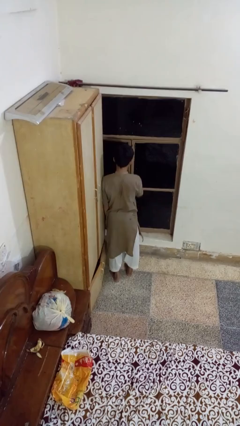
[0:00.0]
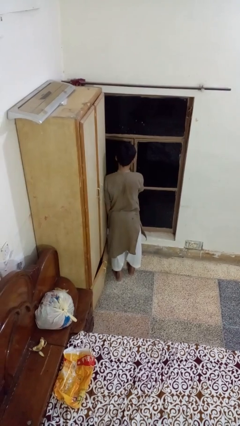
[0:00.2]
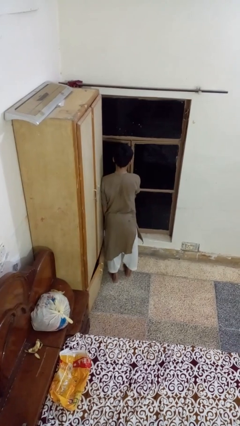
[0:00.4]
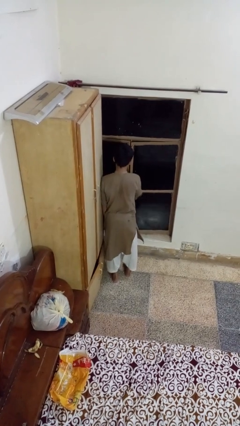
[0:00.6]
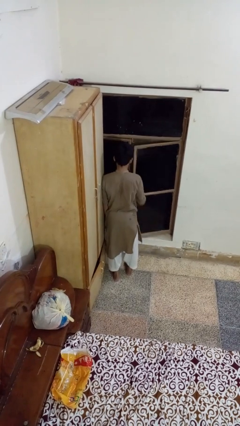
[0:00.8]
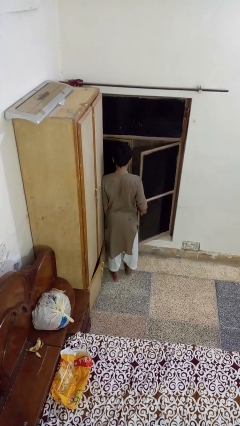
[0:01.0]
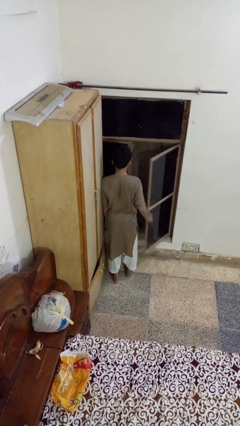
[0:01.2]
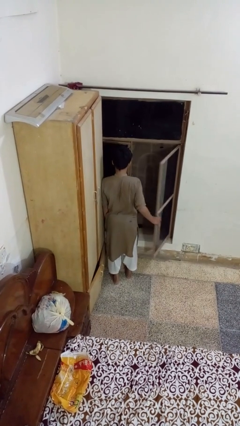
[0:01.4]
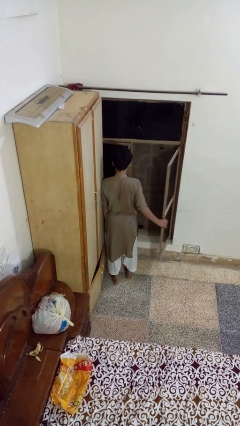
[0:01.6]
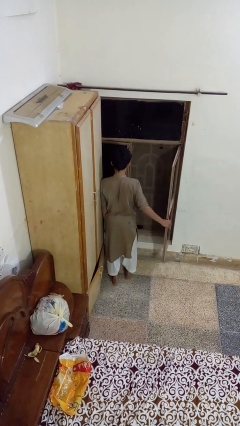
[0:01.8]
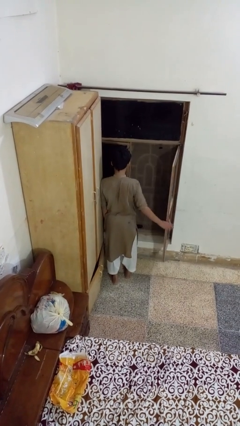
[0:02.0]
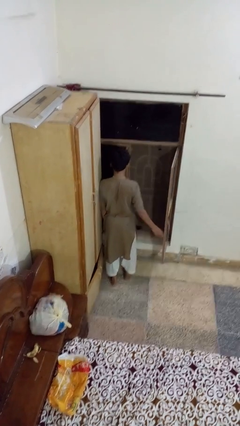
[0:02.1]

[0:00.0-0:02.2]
person opens home window

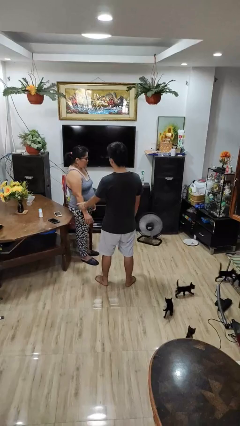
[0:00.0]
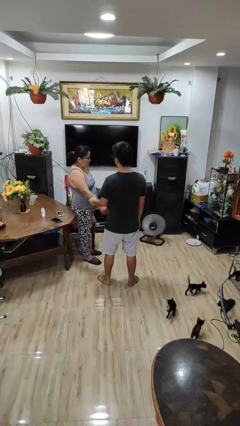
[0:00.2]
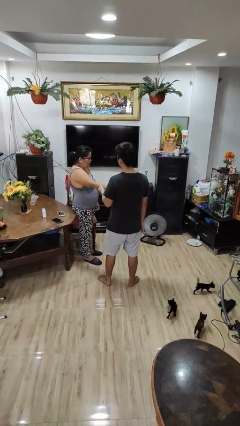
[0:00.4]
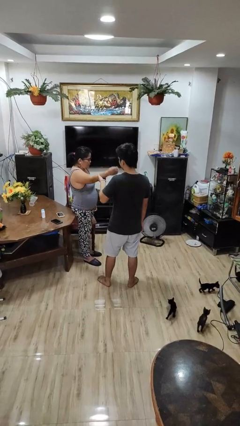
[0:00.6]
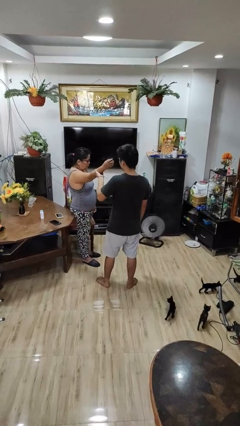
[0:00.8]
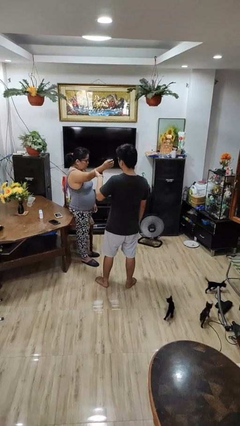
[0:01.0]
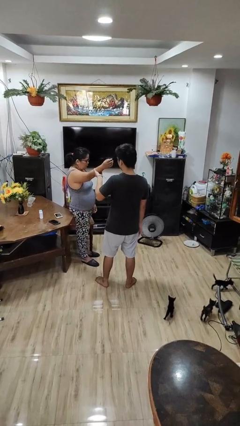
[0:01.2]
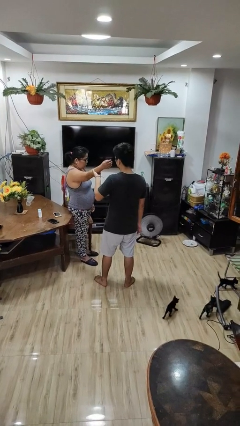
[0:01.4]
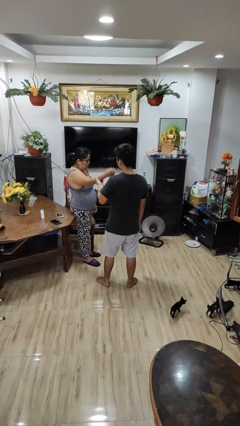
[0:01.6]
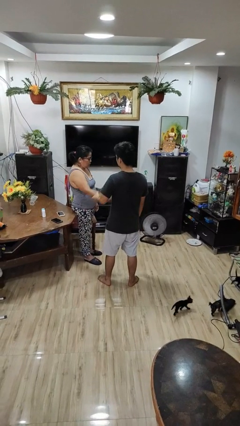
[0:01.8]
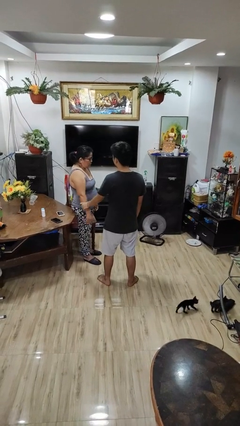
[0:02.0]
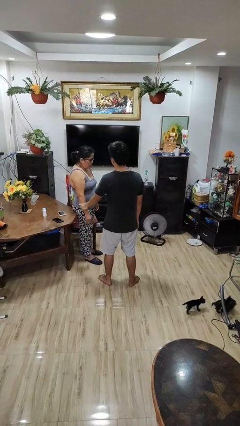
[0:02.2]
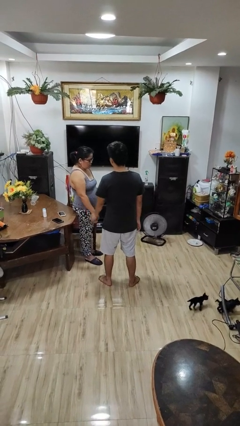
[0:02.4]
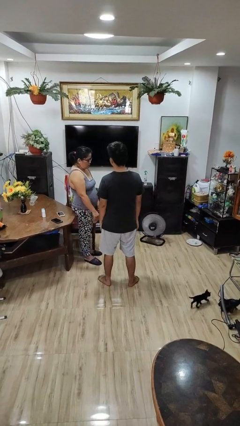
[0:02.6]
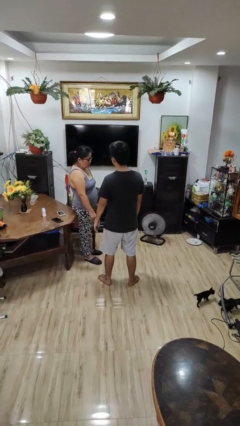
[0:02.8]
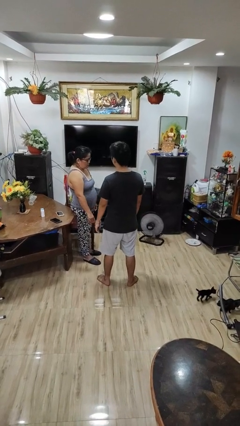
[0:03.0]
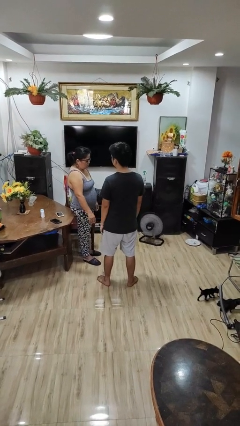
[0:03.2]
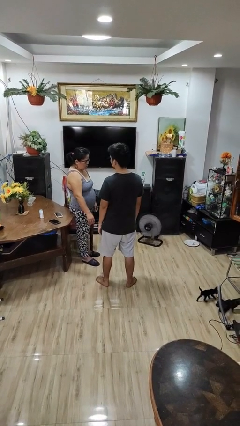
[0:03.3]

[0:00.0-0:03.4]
person grabs person by forearm

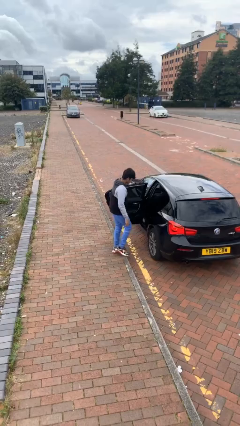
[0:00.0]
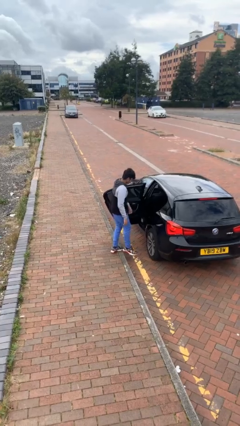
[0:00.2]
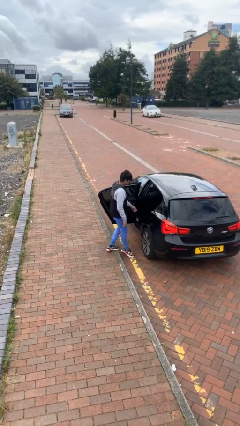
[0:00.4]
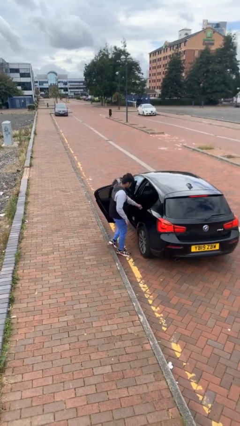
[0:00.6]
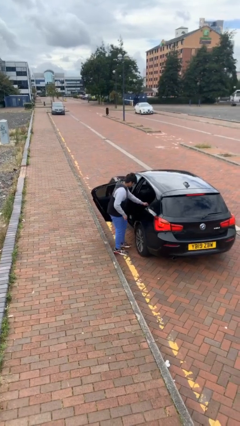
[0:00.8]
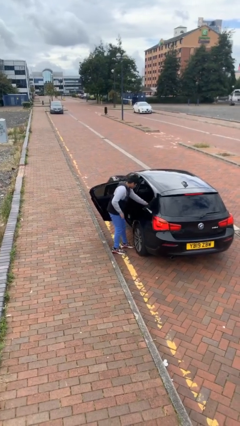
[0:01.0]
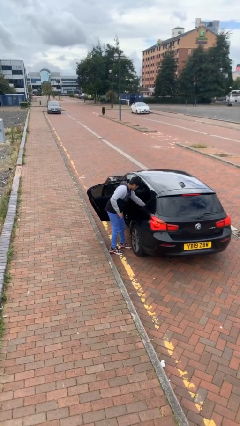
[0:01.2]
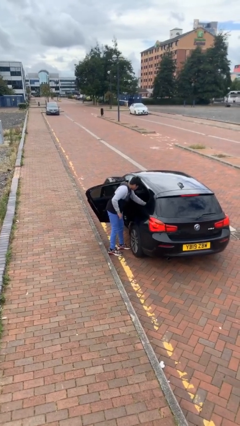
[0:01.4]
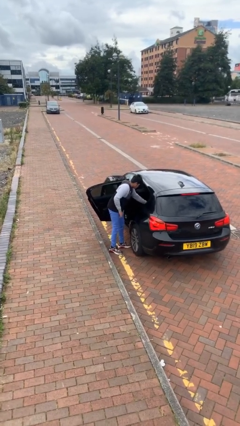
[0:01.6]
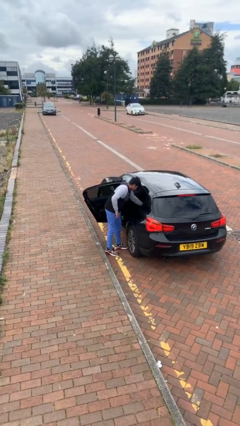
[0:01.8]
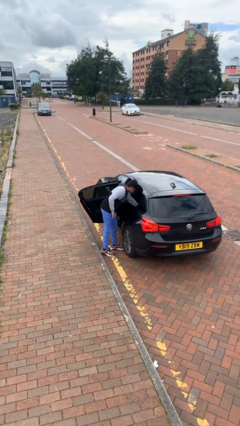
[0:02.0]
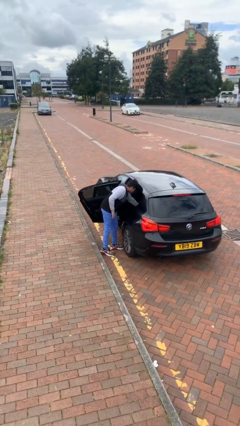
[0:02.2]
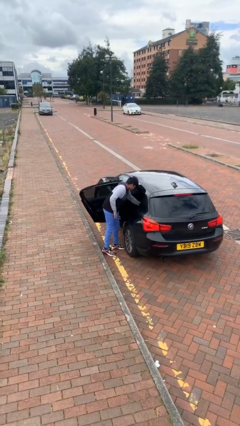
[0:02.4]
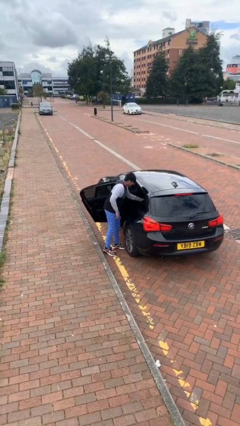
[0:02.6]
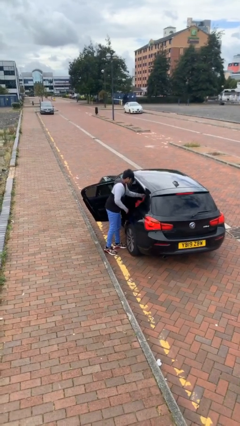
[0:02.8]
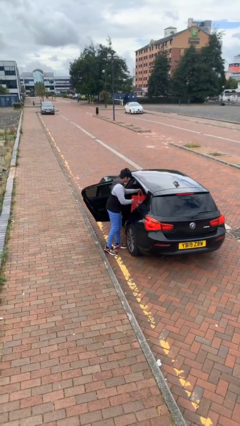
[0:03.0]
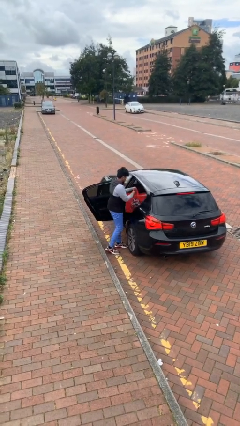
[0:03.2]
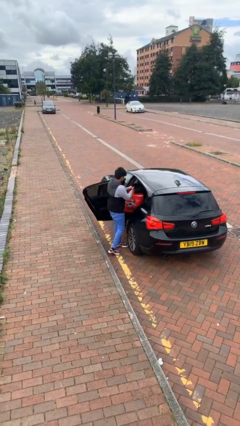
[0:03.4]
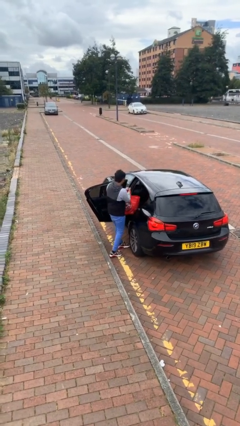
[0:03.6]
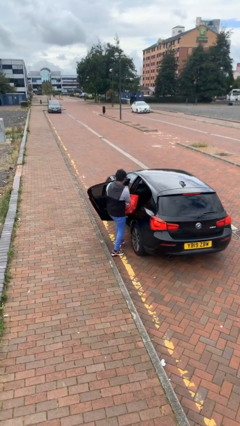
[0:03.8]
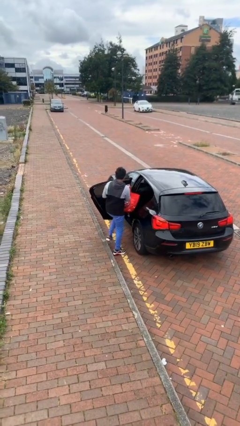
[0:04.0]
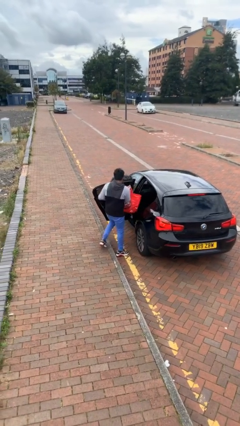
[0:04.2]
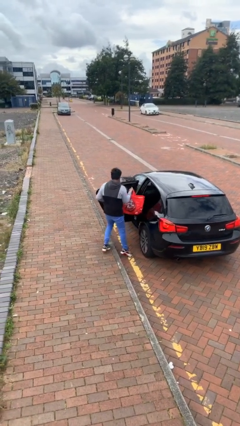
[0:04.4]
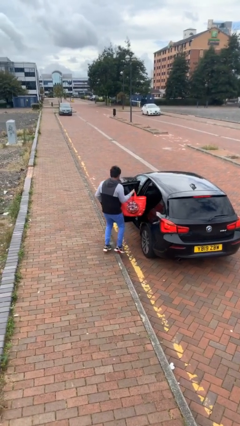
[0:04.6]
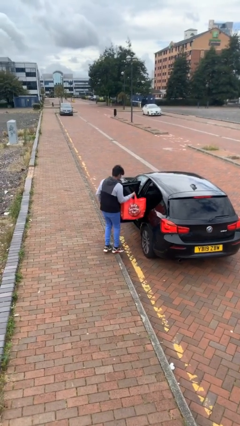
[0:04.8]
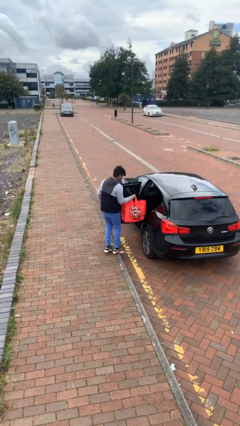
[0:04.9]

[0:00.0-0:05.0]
person unloads car

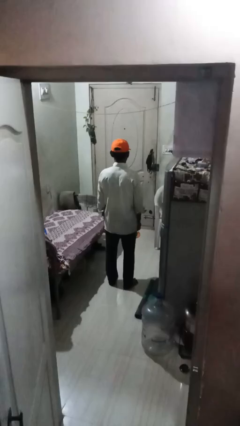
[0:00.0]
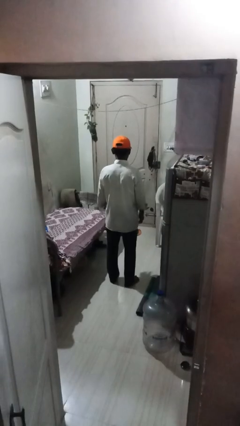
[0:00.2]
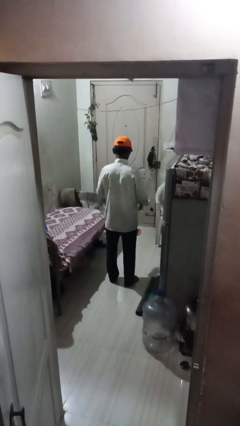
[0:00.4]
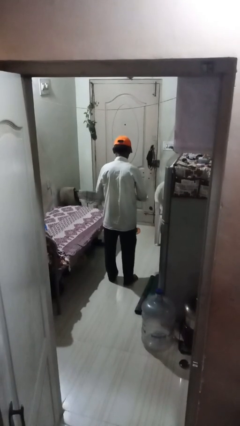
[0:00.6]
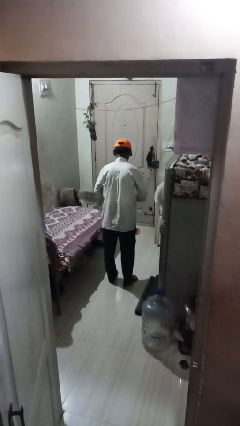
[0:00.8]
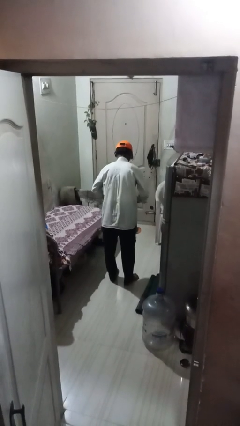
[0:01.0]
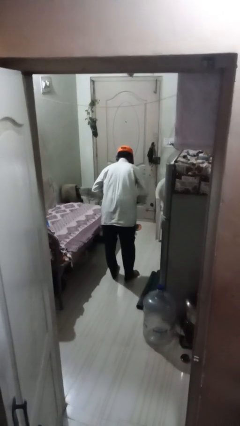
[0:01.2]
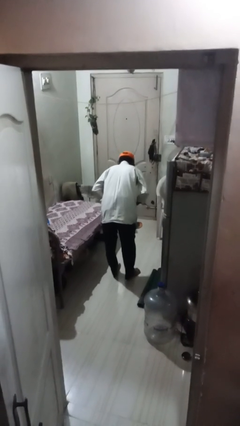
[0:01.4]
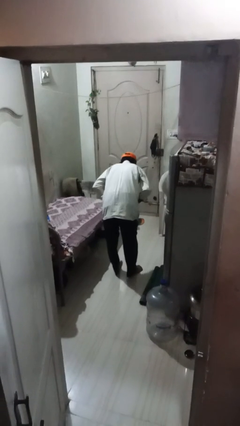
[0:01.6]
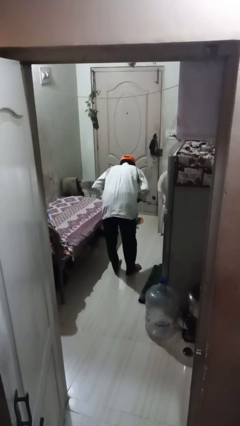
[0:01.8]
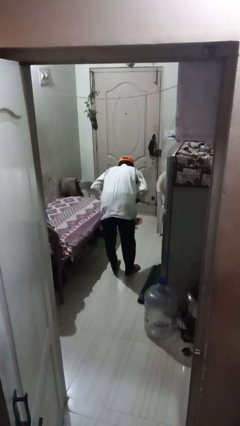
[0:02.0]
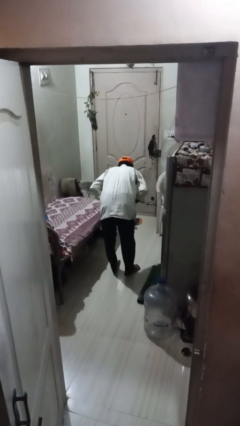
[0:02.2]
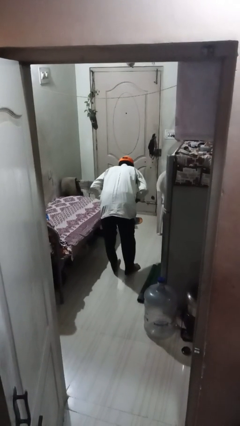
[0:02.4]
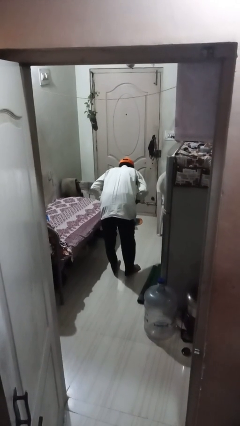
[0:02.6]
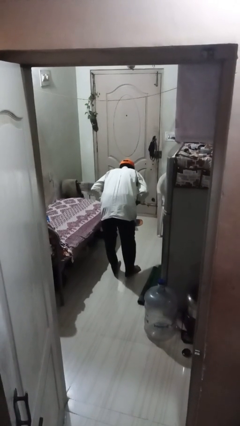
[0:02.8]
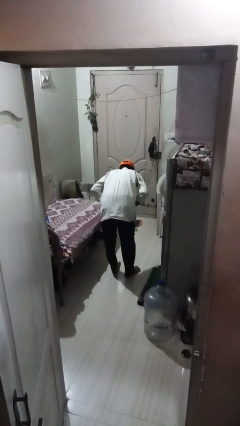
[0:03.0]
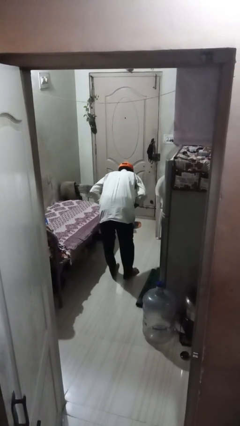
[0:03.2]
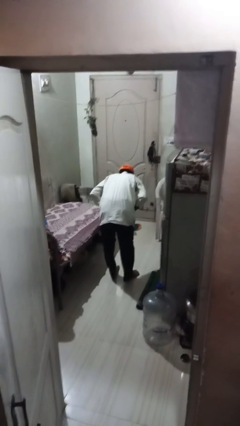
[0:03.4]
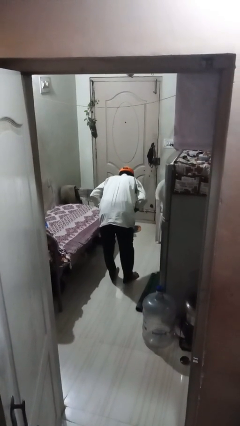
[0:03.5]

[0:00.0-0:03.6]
person bows

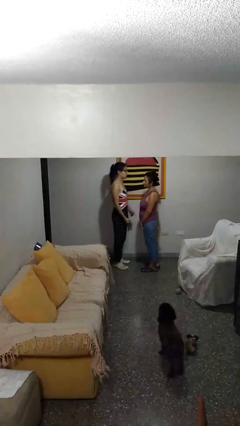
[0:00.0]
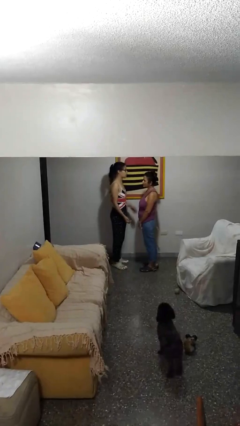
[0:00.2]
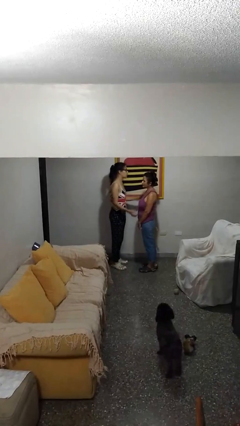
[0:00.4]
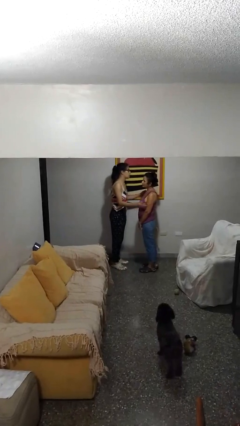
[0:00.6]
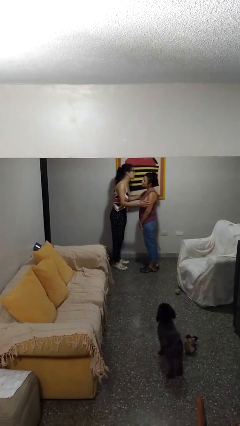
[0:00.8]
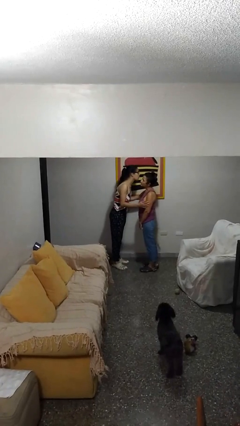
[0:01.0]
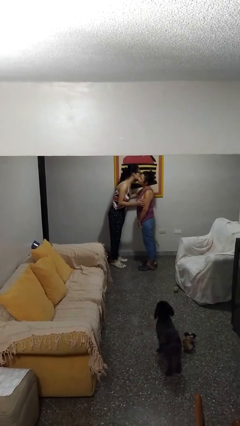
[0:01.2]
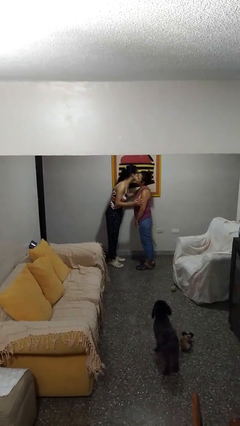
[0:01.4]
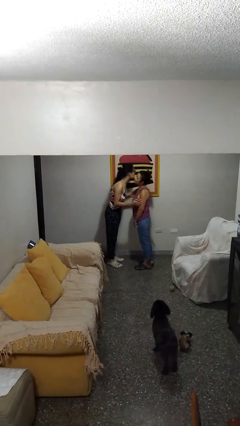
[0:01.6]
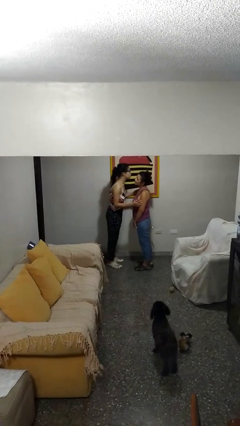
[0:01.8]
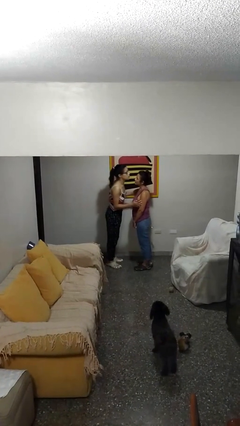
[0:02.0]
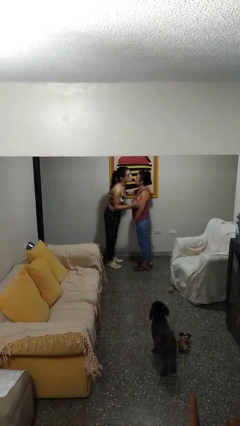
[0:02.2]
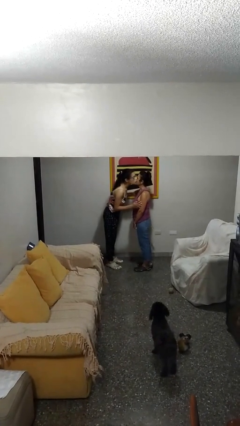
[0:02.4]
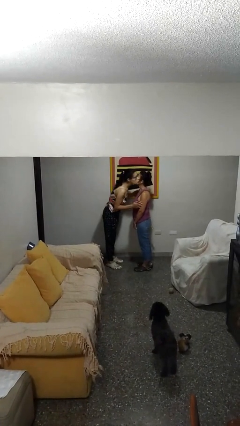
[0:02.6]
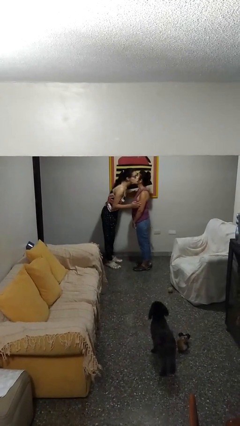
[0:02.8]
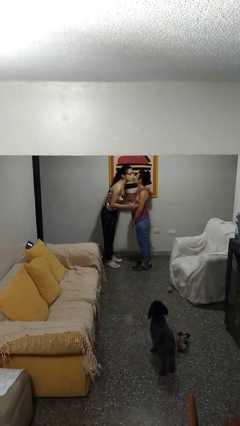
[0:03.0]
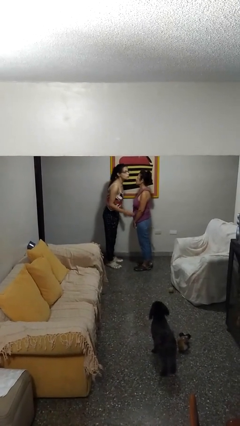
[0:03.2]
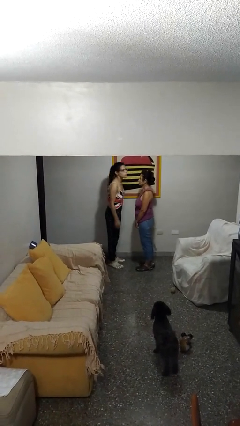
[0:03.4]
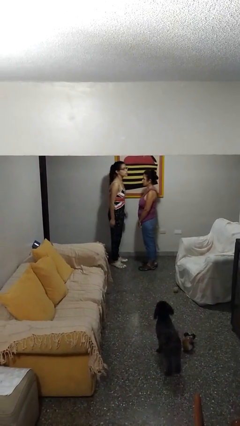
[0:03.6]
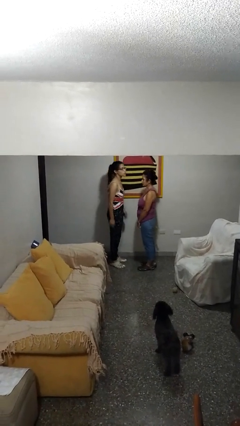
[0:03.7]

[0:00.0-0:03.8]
person kisses cheek of person
